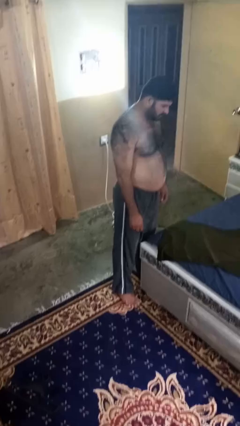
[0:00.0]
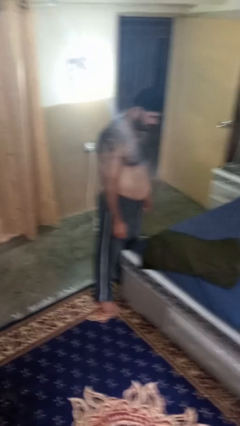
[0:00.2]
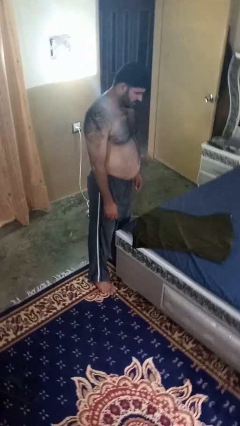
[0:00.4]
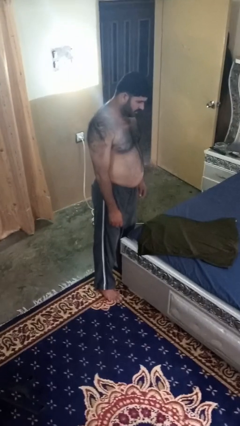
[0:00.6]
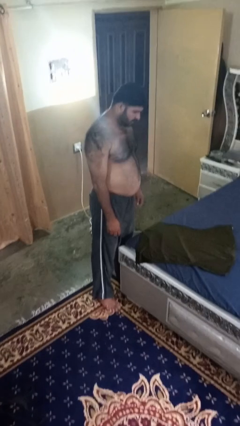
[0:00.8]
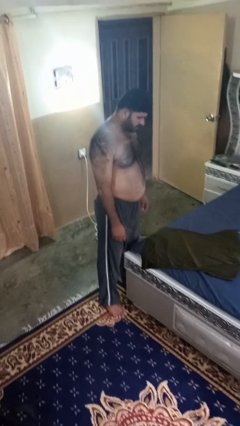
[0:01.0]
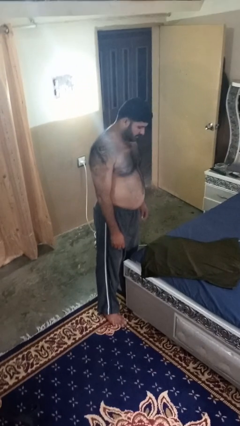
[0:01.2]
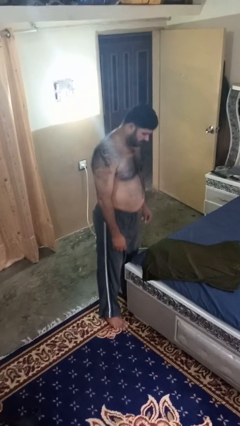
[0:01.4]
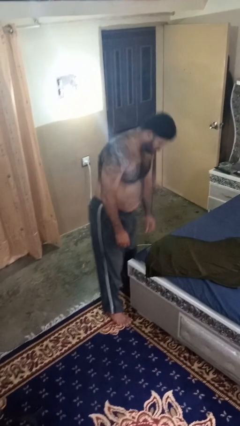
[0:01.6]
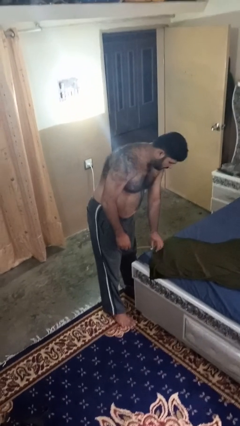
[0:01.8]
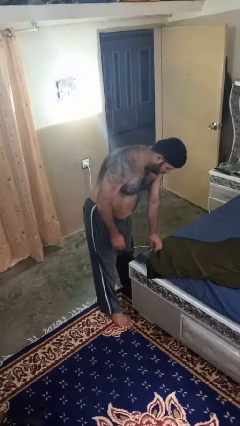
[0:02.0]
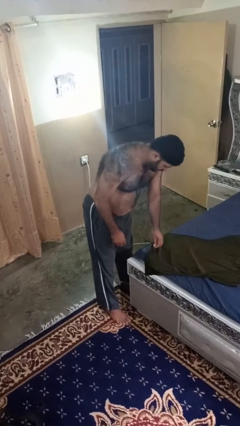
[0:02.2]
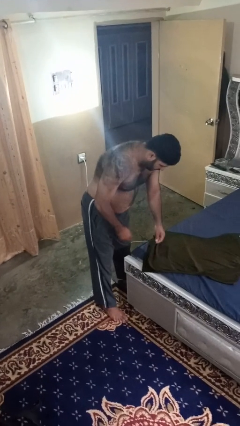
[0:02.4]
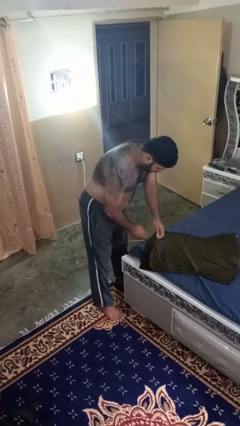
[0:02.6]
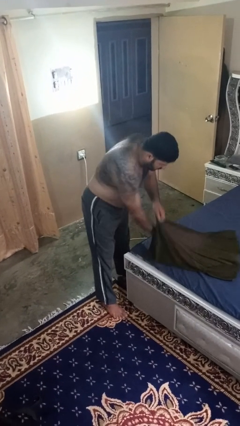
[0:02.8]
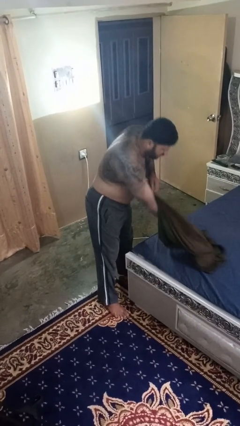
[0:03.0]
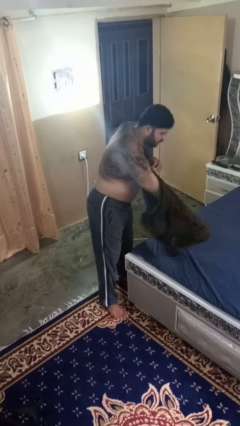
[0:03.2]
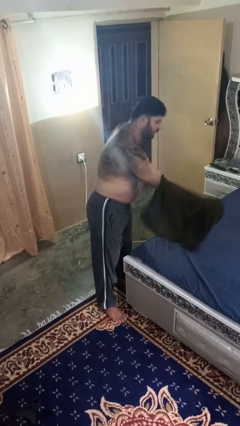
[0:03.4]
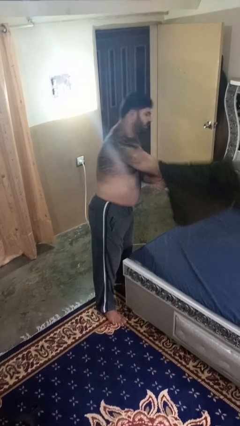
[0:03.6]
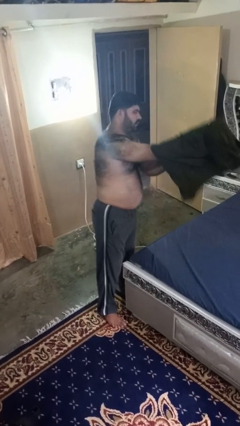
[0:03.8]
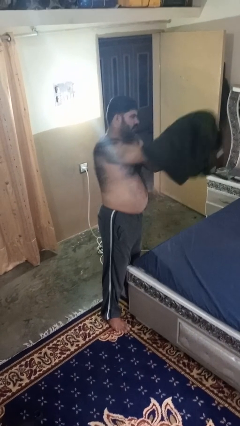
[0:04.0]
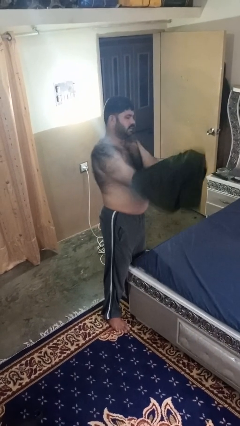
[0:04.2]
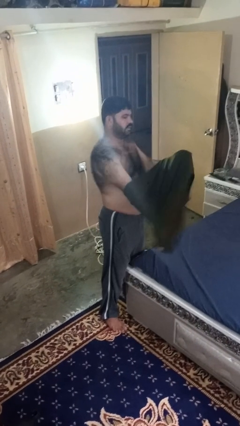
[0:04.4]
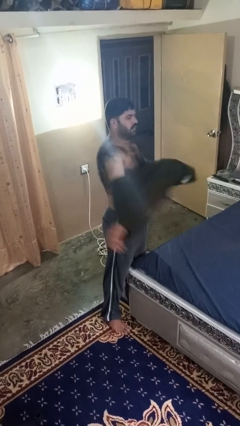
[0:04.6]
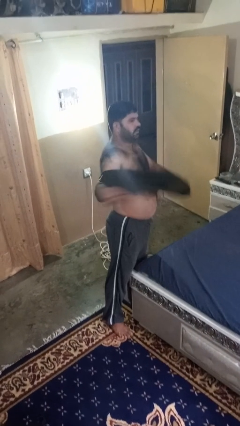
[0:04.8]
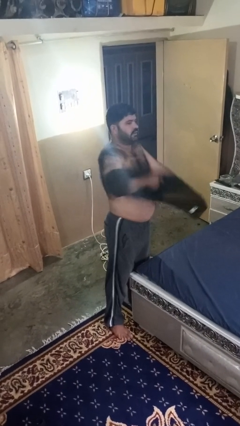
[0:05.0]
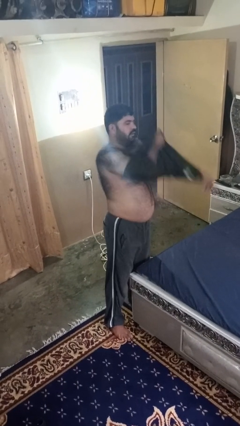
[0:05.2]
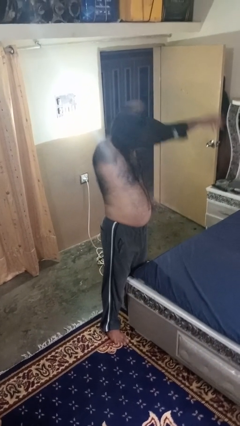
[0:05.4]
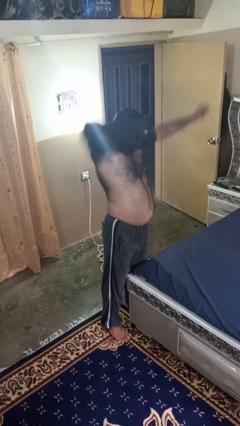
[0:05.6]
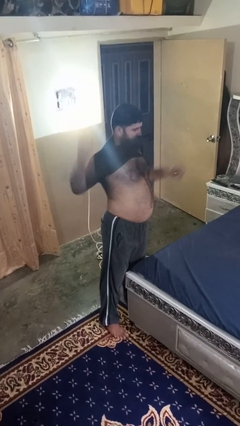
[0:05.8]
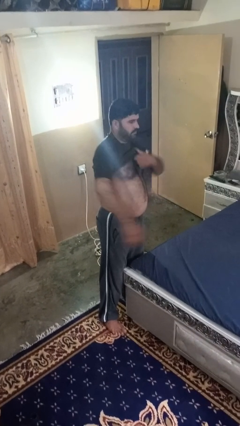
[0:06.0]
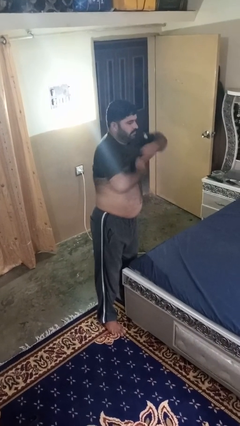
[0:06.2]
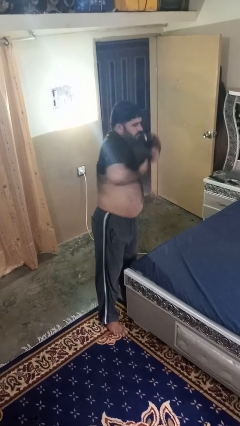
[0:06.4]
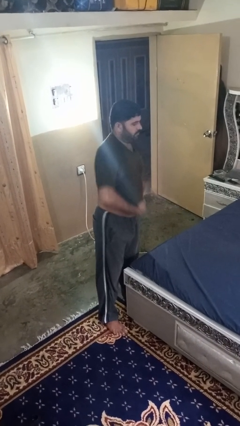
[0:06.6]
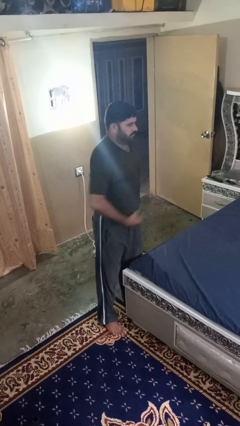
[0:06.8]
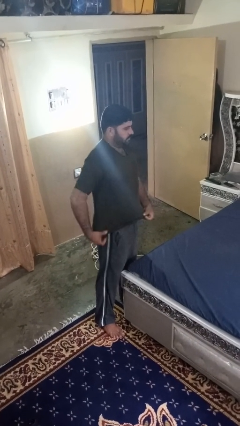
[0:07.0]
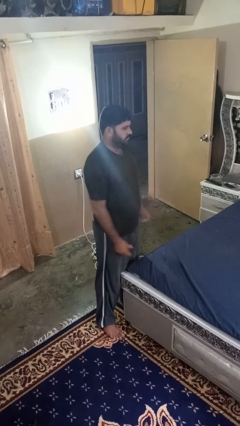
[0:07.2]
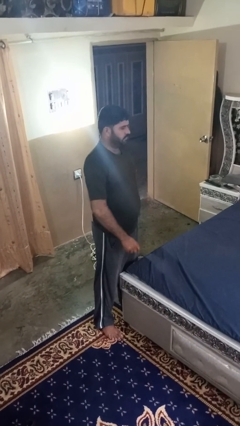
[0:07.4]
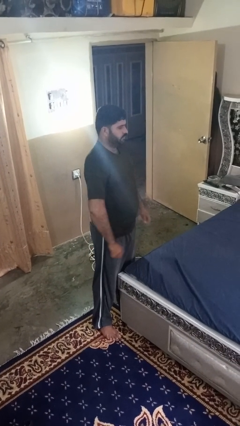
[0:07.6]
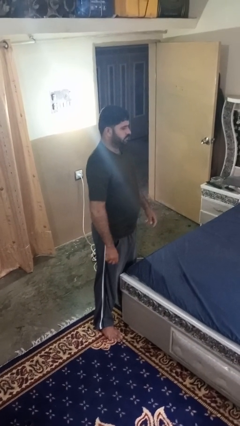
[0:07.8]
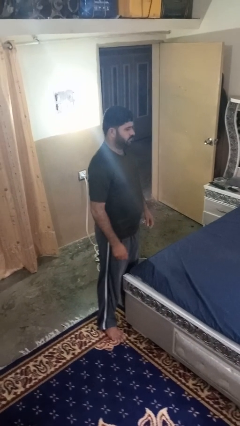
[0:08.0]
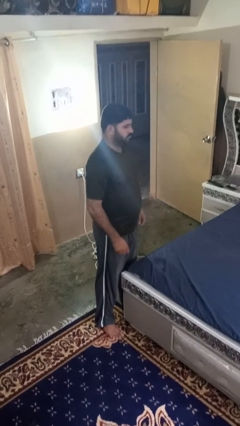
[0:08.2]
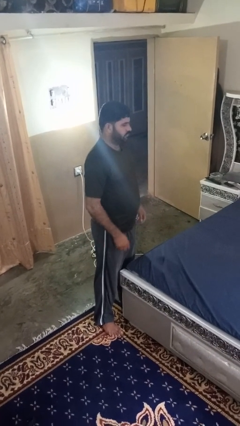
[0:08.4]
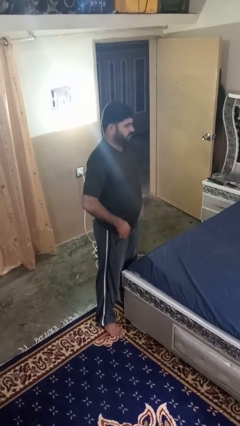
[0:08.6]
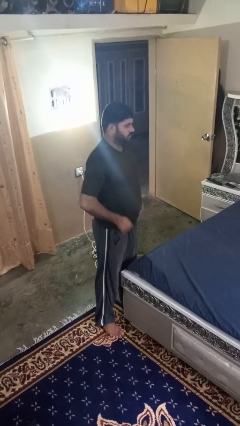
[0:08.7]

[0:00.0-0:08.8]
person puts on shirt

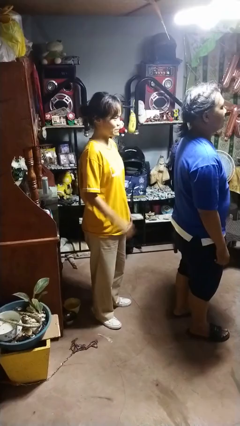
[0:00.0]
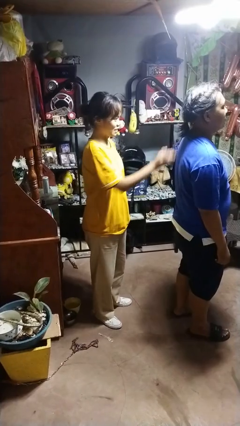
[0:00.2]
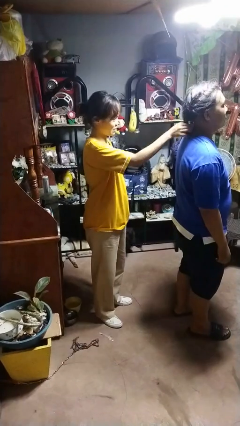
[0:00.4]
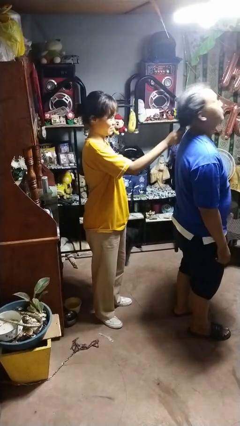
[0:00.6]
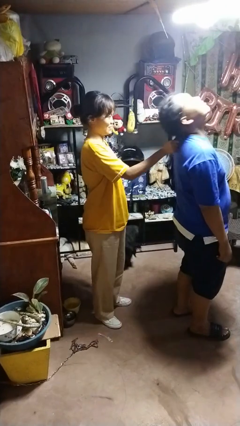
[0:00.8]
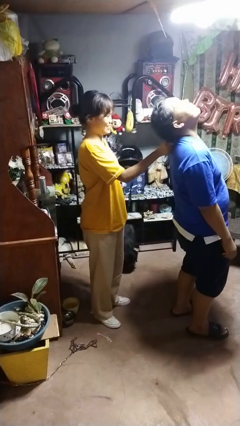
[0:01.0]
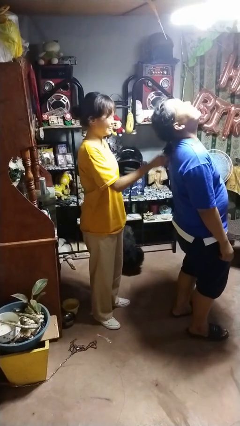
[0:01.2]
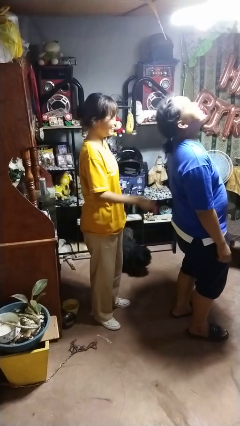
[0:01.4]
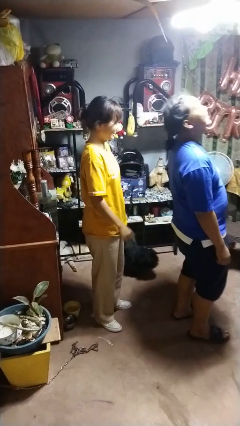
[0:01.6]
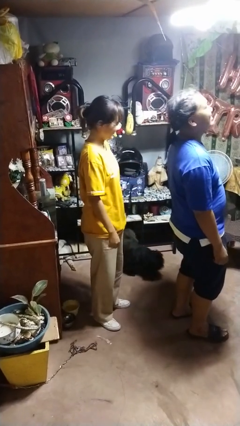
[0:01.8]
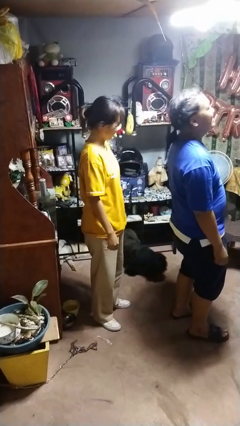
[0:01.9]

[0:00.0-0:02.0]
person grabs person by hair

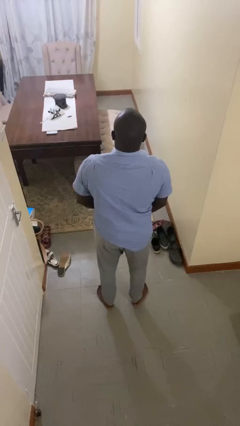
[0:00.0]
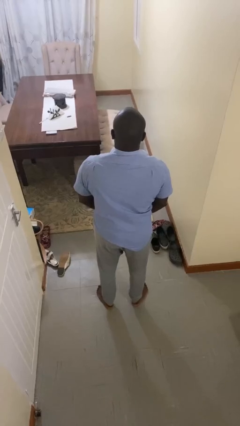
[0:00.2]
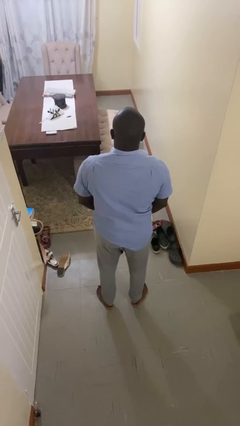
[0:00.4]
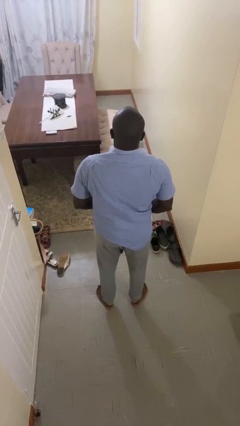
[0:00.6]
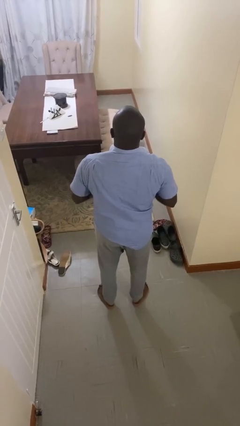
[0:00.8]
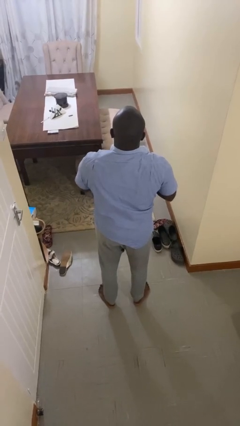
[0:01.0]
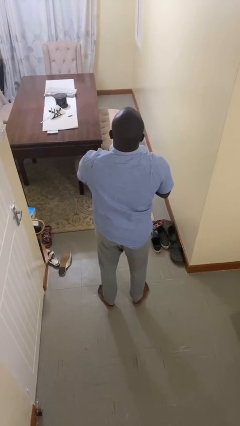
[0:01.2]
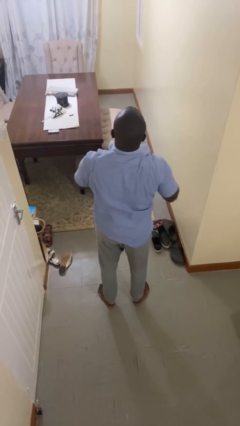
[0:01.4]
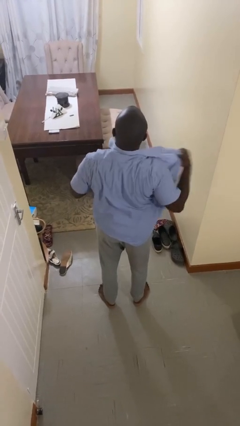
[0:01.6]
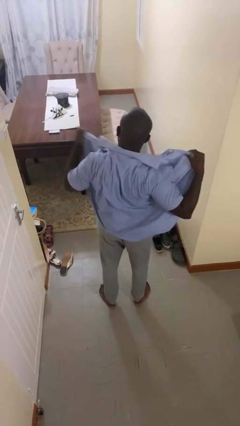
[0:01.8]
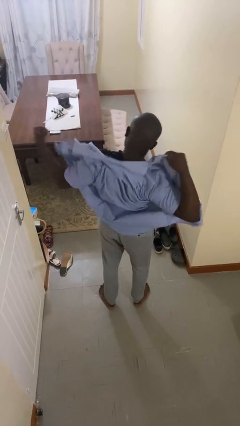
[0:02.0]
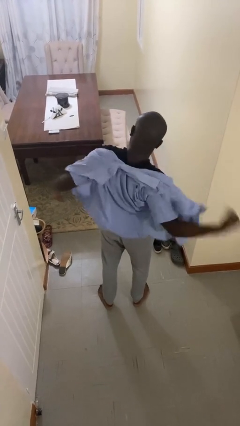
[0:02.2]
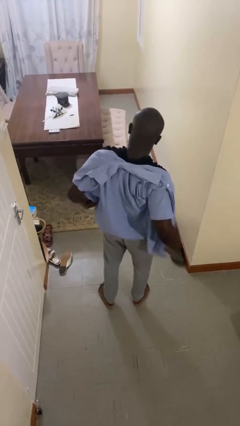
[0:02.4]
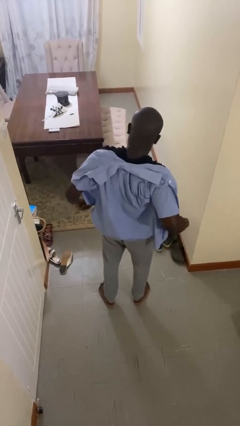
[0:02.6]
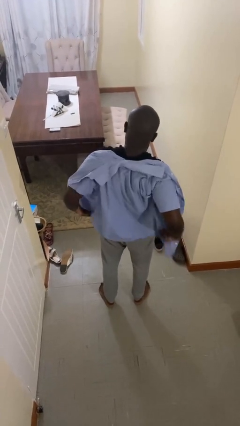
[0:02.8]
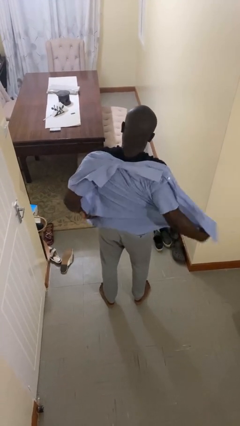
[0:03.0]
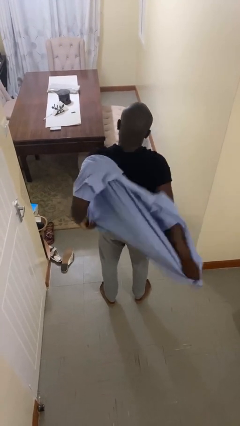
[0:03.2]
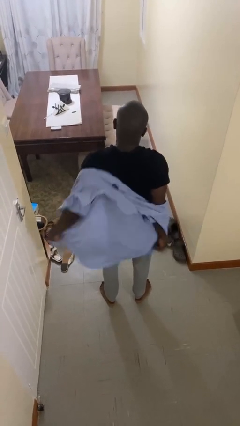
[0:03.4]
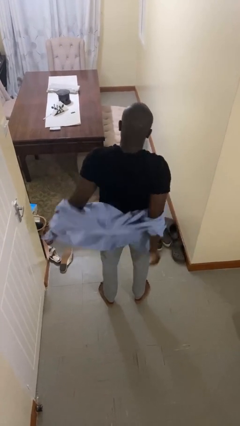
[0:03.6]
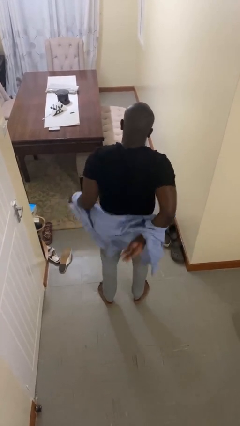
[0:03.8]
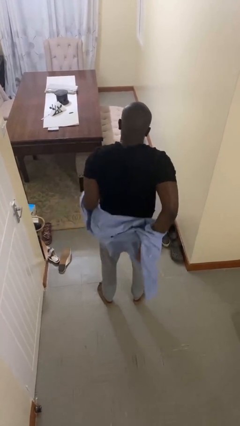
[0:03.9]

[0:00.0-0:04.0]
person takes off shirt

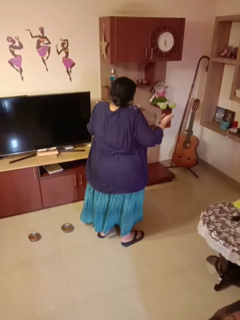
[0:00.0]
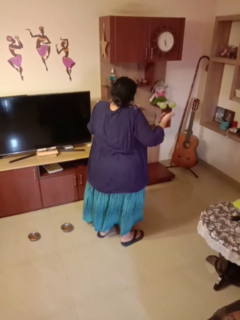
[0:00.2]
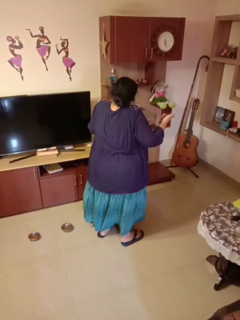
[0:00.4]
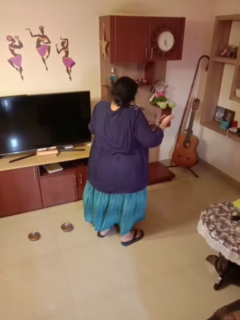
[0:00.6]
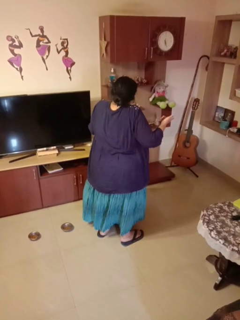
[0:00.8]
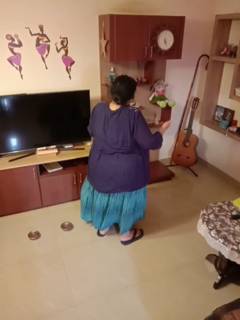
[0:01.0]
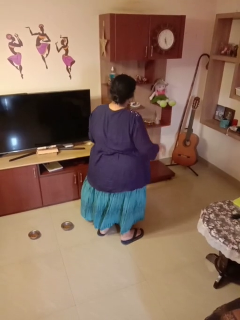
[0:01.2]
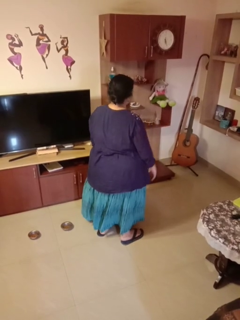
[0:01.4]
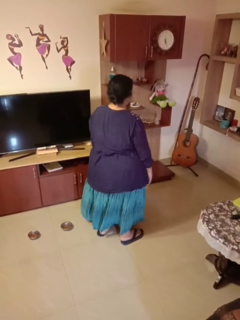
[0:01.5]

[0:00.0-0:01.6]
person shrugs

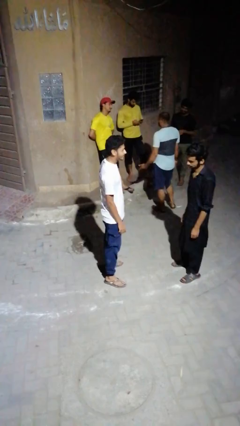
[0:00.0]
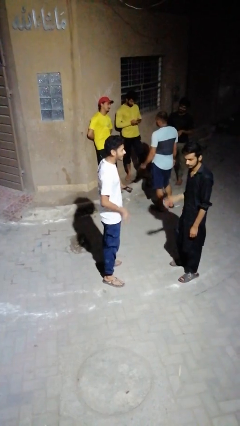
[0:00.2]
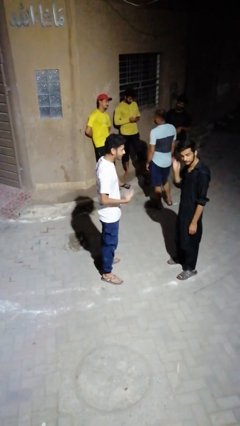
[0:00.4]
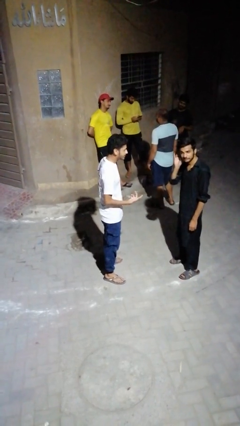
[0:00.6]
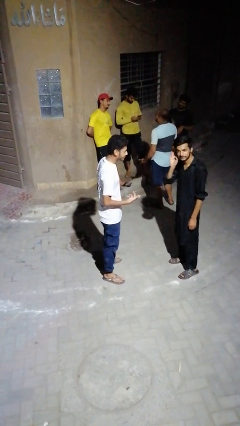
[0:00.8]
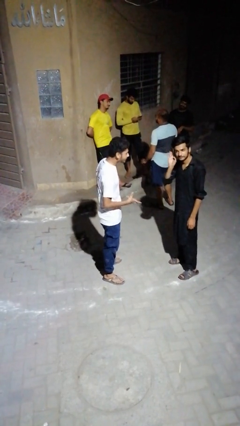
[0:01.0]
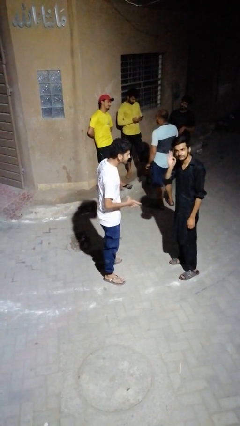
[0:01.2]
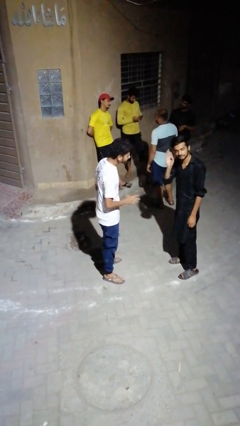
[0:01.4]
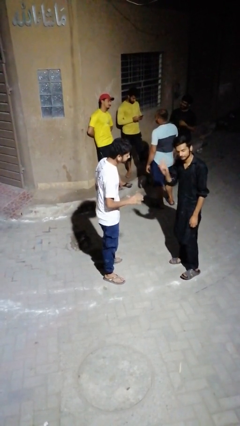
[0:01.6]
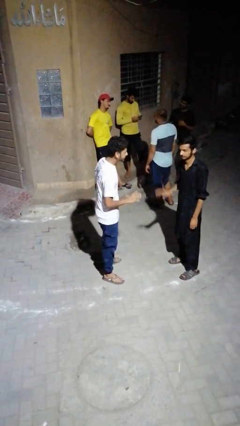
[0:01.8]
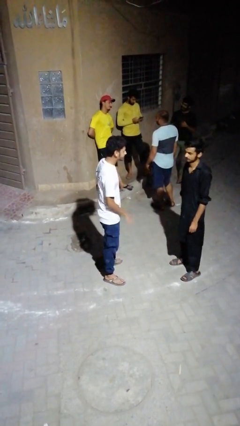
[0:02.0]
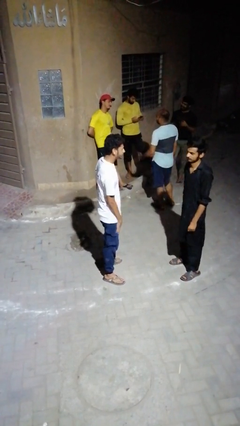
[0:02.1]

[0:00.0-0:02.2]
person talks to person
